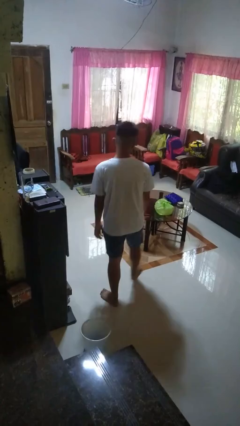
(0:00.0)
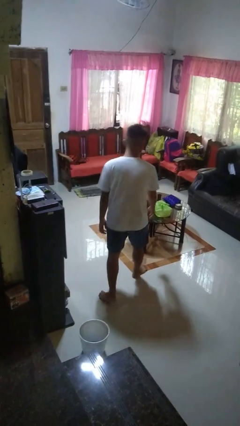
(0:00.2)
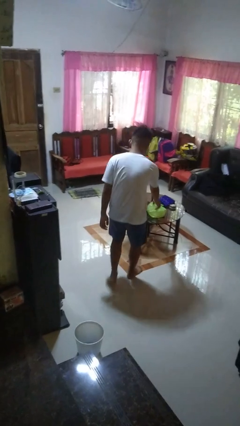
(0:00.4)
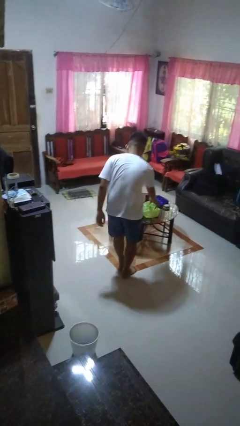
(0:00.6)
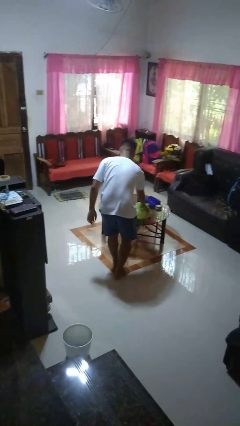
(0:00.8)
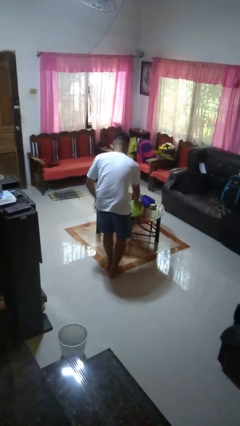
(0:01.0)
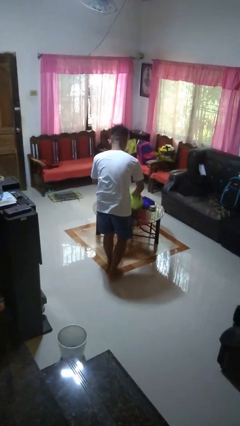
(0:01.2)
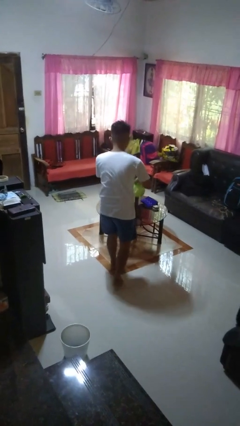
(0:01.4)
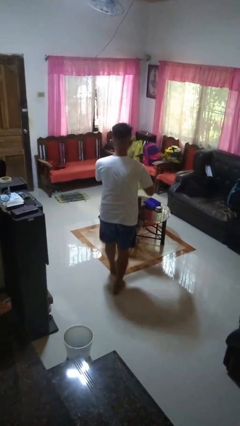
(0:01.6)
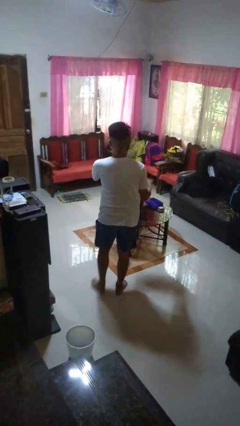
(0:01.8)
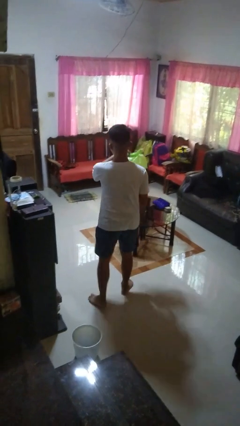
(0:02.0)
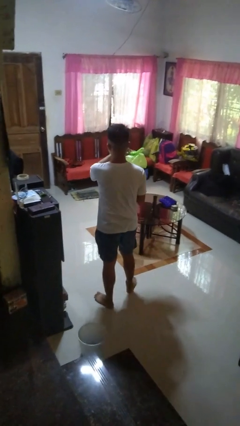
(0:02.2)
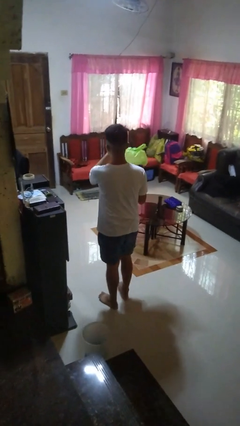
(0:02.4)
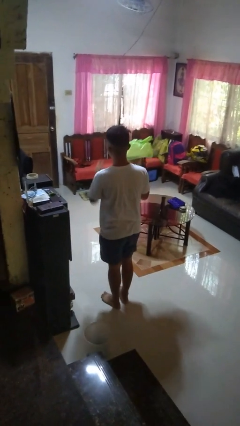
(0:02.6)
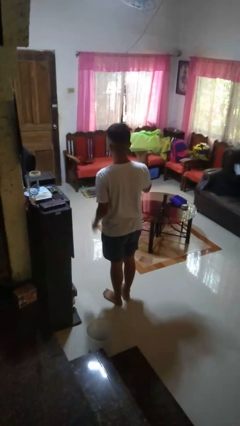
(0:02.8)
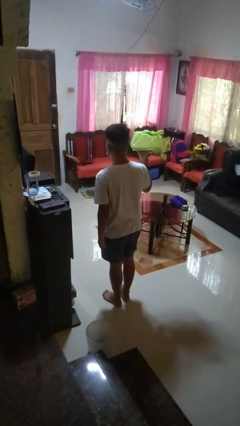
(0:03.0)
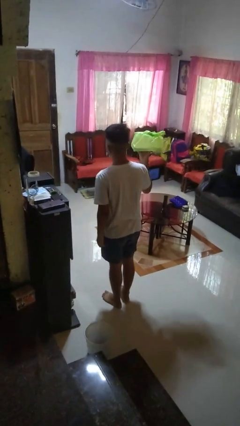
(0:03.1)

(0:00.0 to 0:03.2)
person picks up object from table

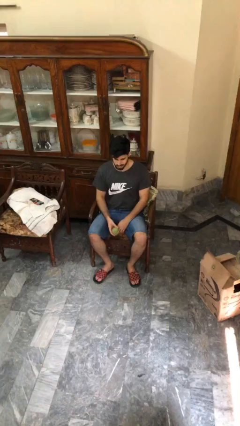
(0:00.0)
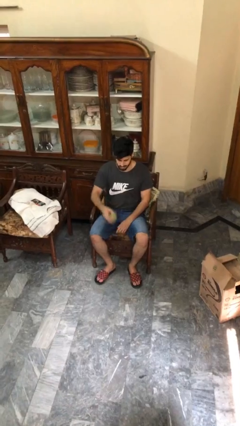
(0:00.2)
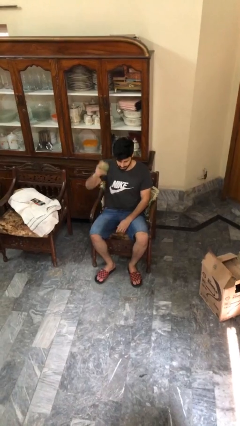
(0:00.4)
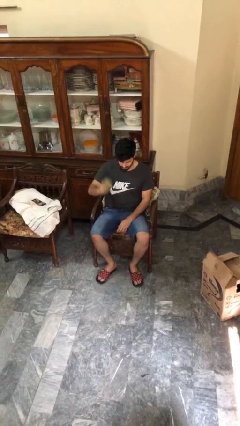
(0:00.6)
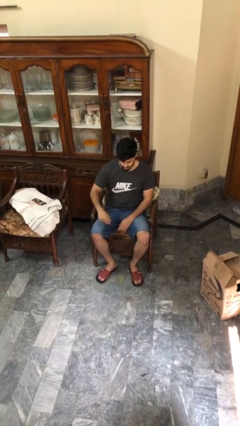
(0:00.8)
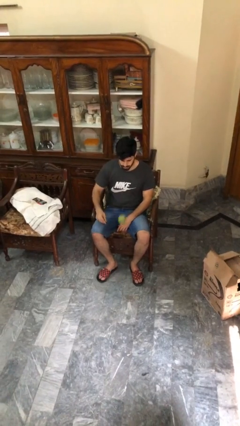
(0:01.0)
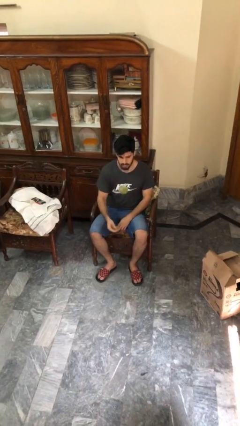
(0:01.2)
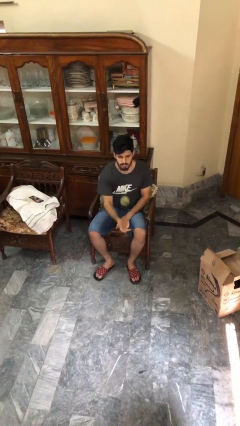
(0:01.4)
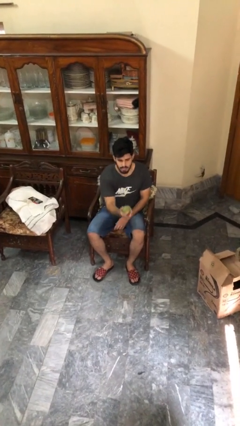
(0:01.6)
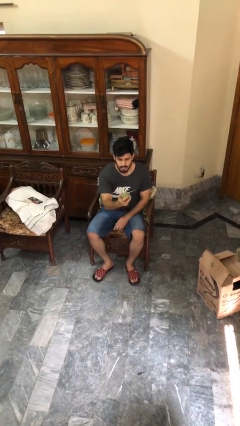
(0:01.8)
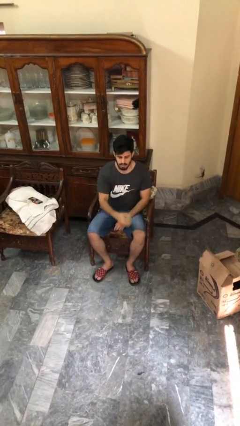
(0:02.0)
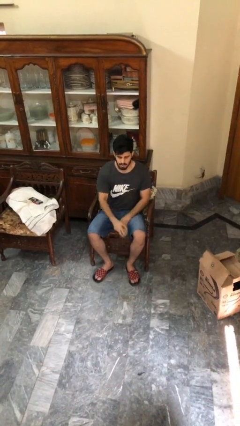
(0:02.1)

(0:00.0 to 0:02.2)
person bounces ball on floor

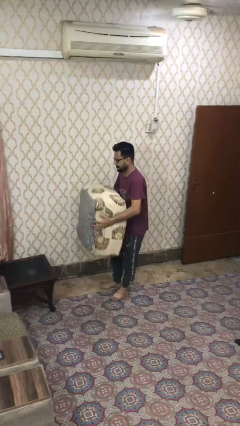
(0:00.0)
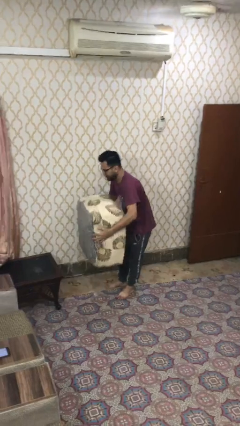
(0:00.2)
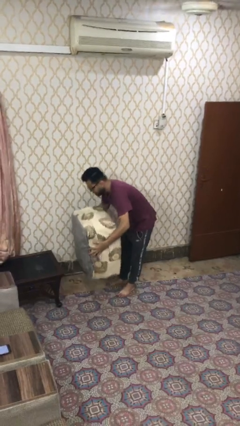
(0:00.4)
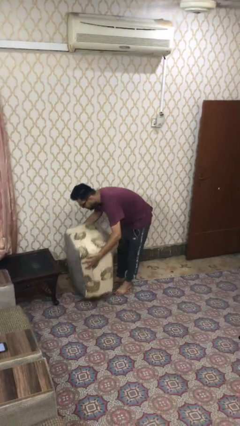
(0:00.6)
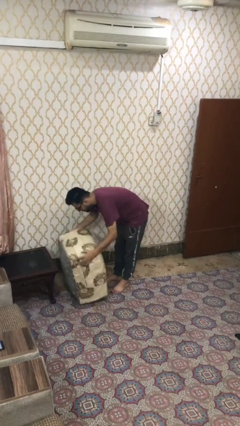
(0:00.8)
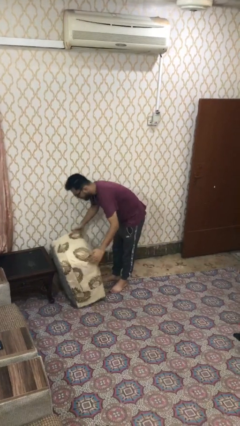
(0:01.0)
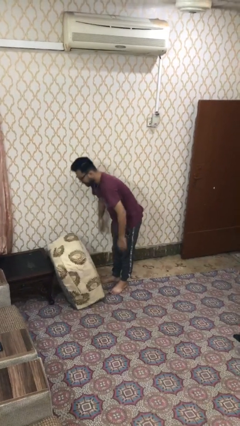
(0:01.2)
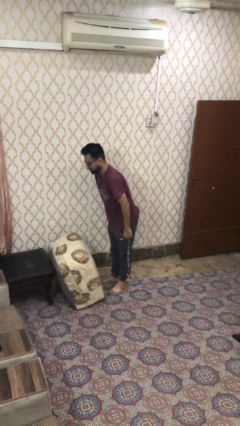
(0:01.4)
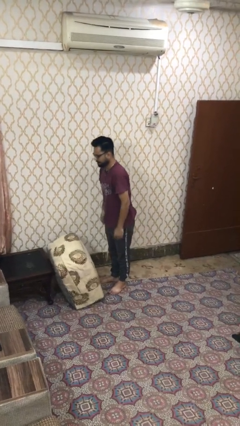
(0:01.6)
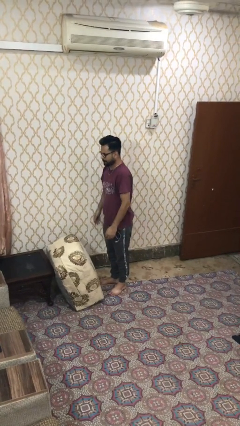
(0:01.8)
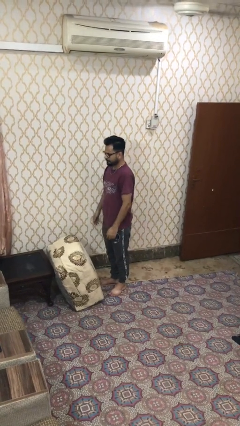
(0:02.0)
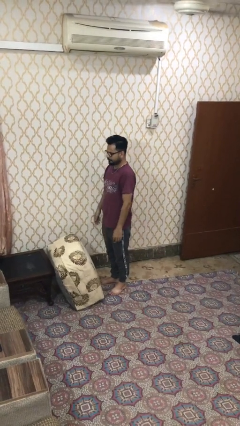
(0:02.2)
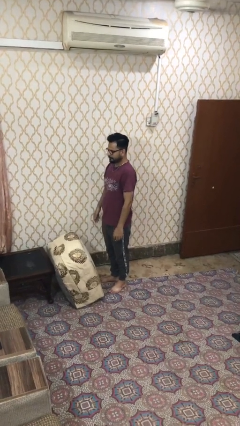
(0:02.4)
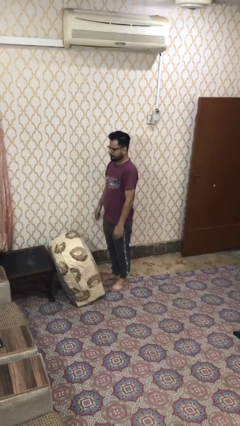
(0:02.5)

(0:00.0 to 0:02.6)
person puts down object on floor

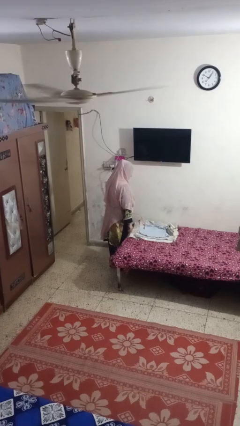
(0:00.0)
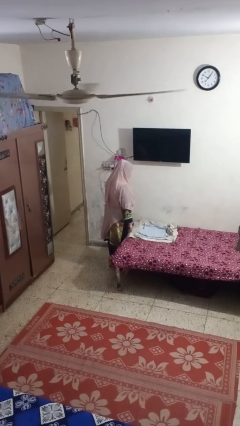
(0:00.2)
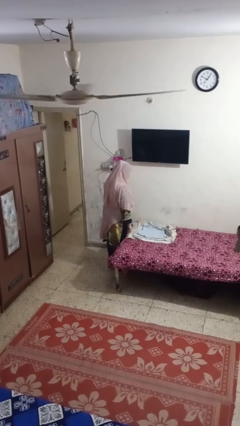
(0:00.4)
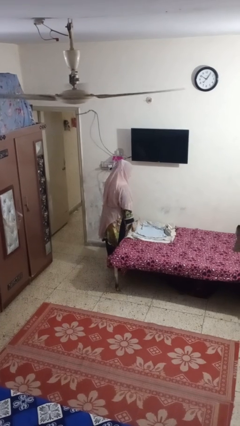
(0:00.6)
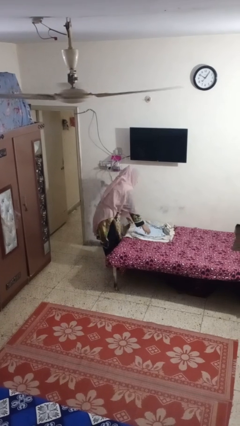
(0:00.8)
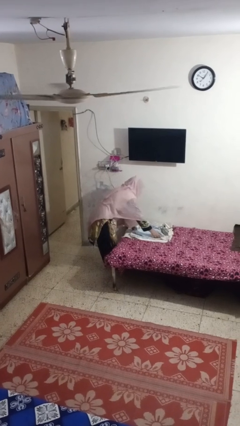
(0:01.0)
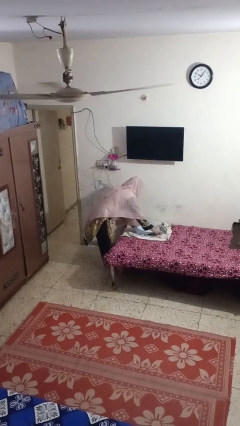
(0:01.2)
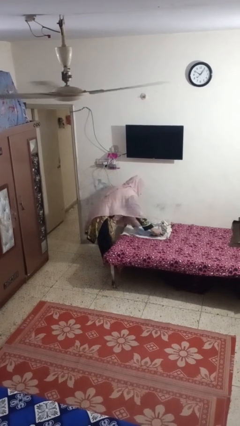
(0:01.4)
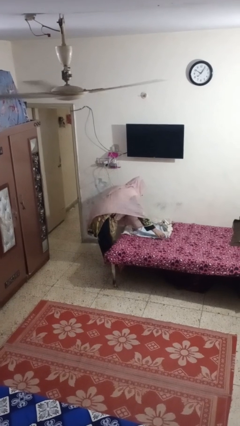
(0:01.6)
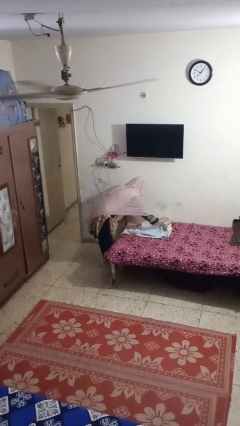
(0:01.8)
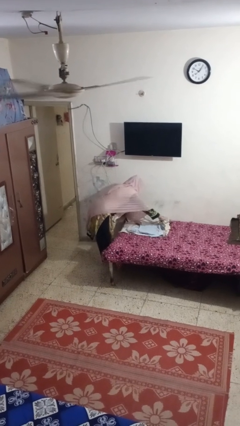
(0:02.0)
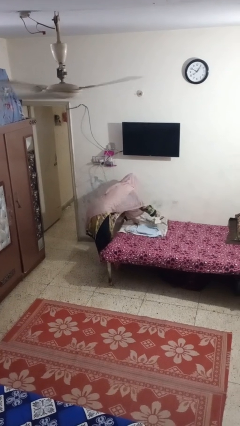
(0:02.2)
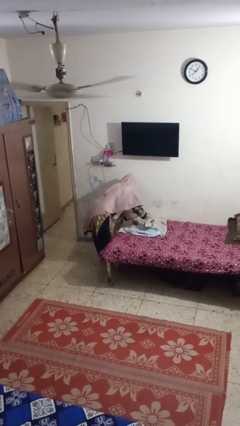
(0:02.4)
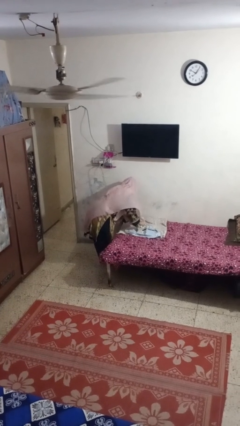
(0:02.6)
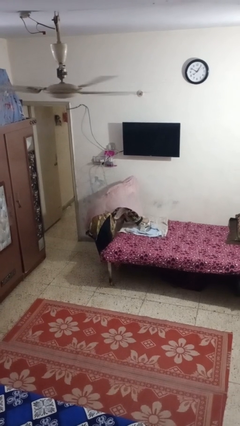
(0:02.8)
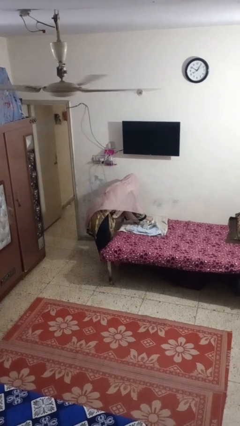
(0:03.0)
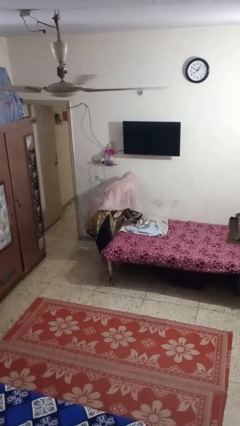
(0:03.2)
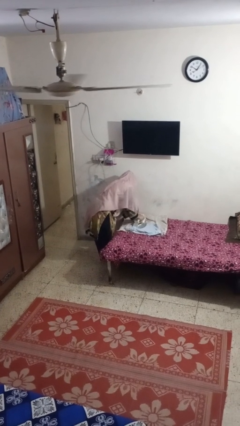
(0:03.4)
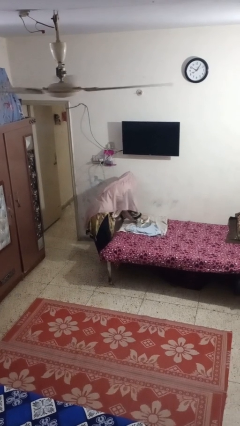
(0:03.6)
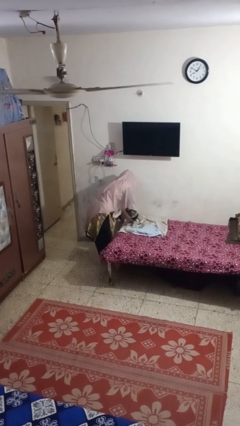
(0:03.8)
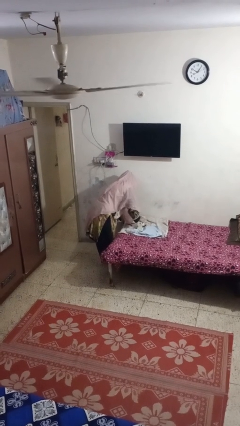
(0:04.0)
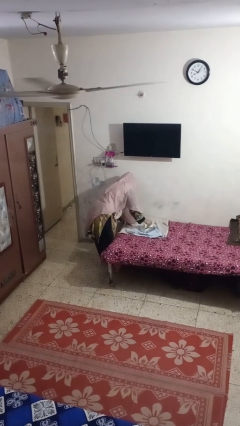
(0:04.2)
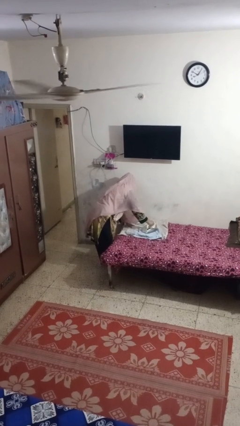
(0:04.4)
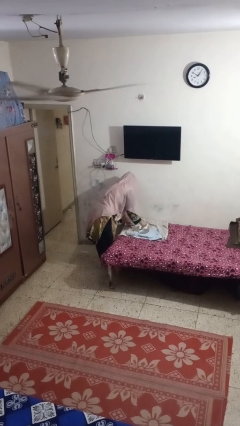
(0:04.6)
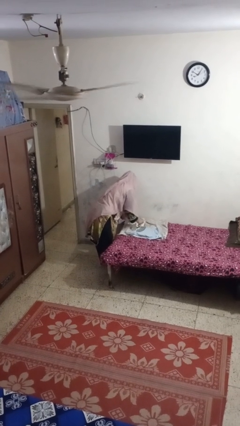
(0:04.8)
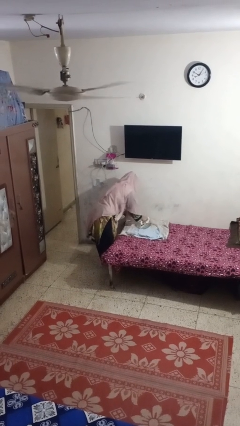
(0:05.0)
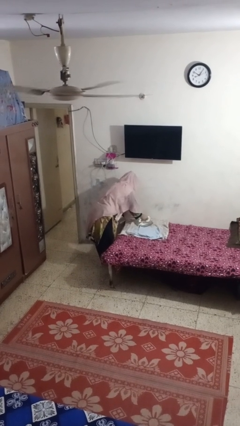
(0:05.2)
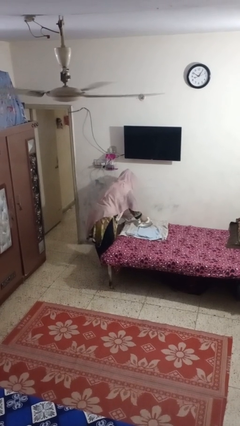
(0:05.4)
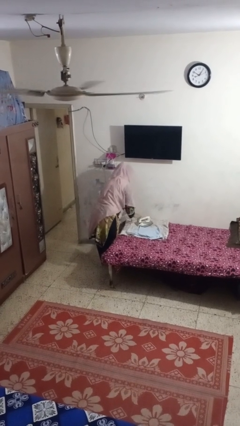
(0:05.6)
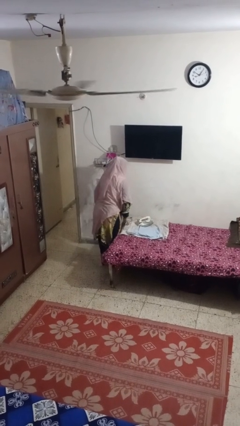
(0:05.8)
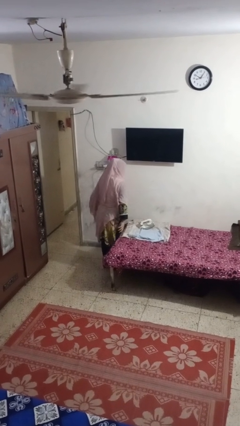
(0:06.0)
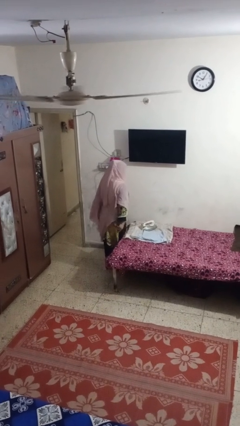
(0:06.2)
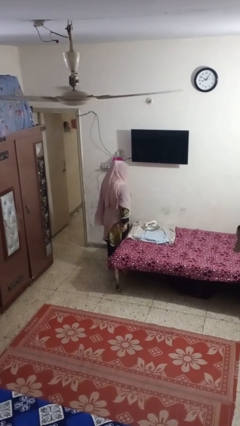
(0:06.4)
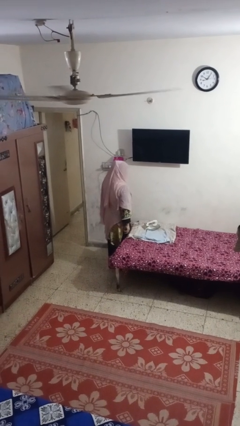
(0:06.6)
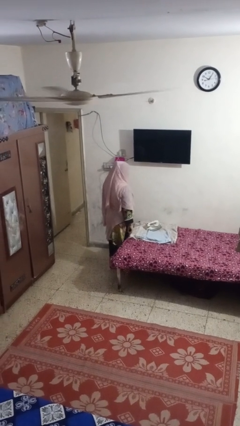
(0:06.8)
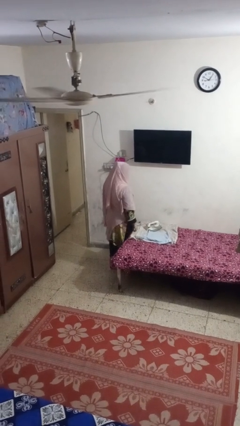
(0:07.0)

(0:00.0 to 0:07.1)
person irons clothes

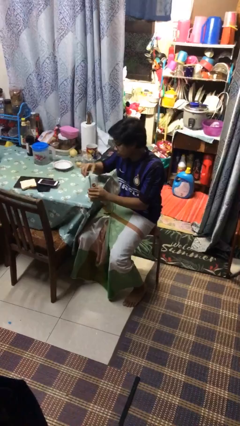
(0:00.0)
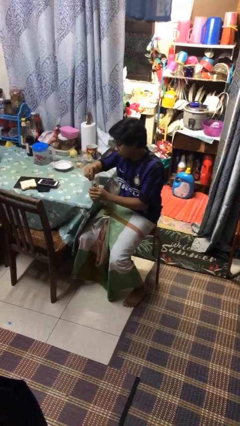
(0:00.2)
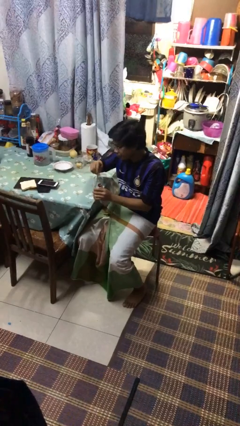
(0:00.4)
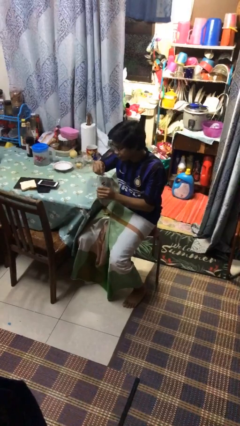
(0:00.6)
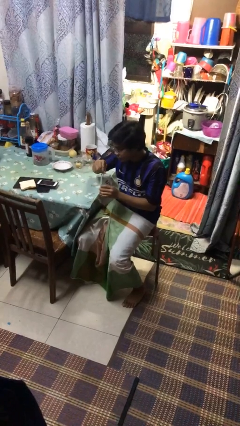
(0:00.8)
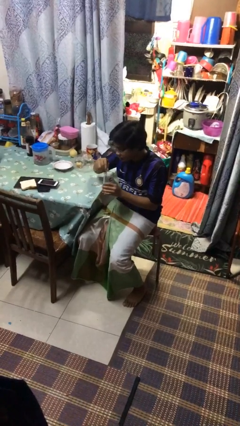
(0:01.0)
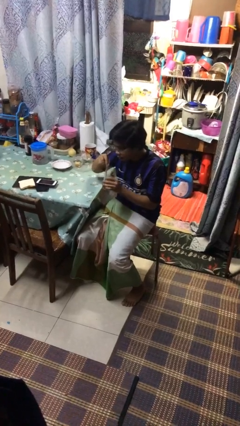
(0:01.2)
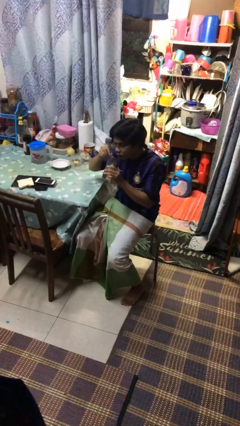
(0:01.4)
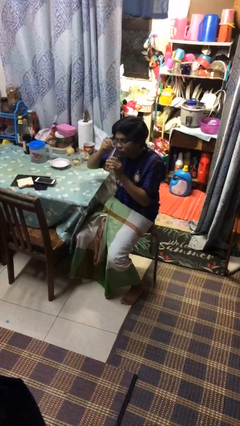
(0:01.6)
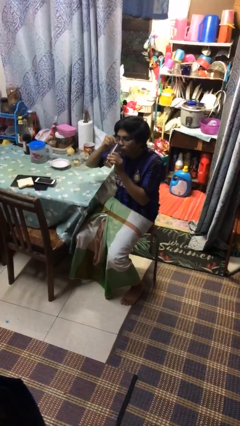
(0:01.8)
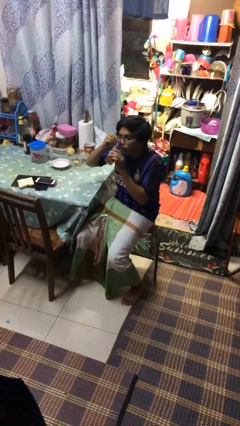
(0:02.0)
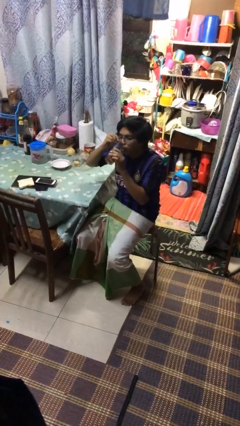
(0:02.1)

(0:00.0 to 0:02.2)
person stirs mug

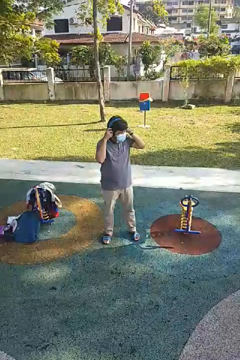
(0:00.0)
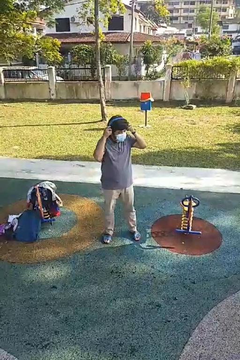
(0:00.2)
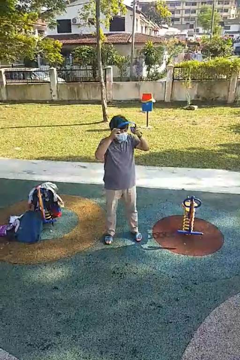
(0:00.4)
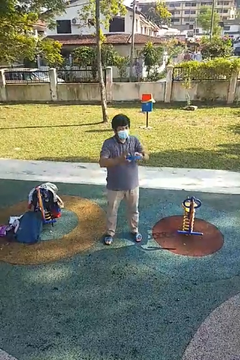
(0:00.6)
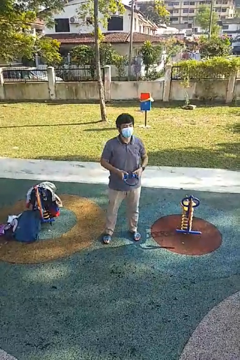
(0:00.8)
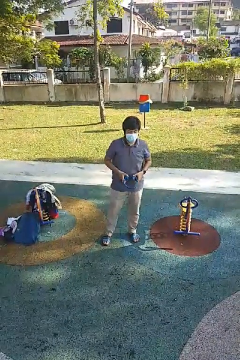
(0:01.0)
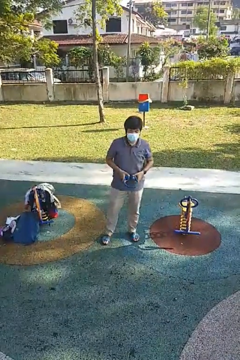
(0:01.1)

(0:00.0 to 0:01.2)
person takes off headphones
